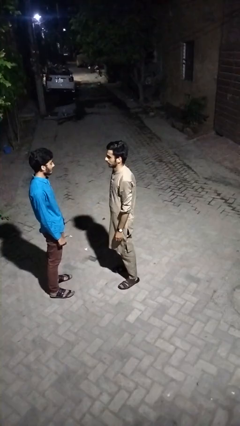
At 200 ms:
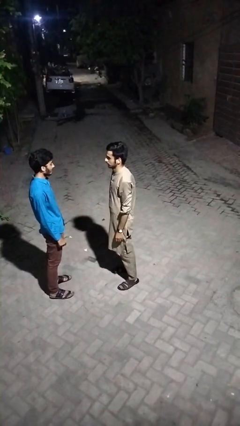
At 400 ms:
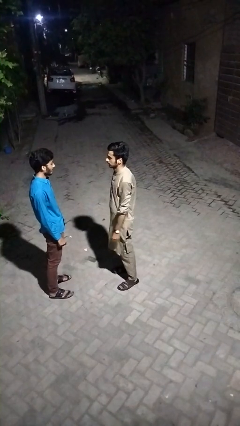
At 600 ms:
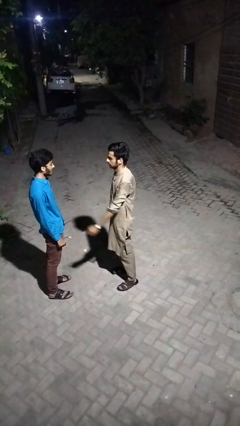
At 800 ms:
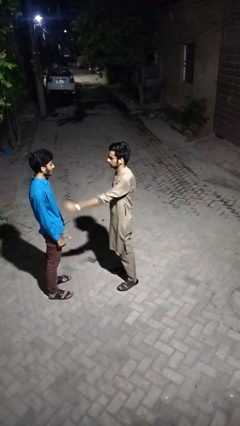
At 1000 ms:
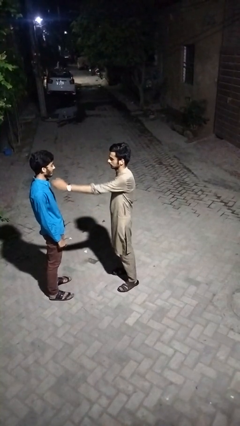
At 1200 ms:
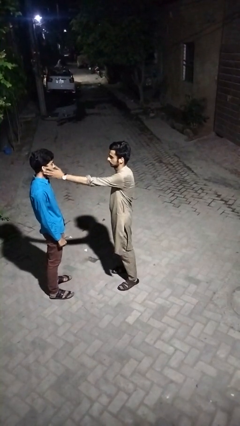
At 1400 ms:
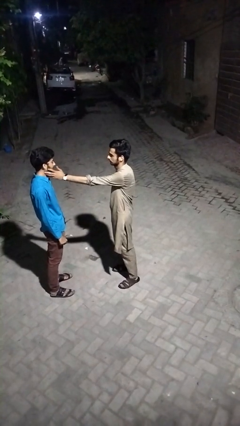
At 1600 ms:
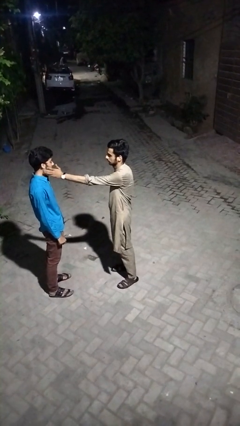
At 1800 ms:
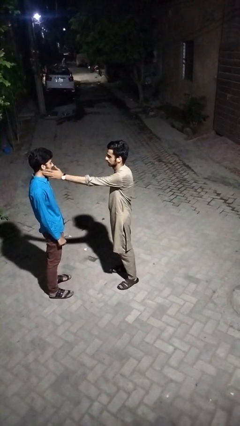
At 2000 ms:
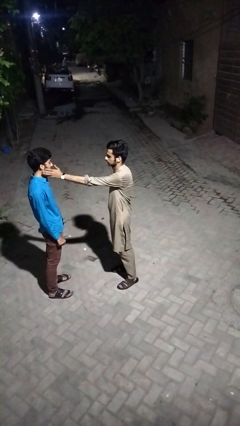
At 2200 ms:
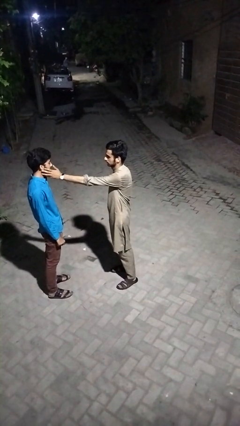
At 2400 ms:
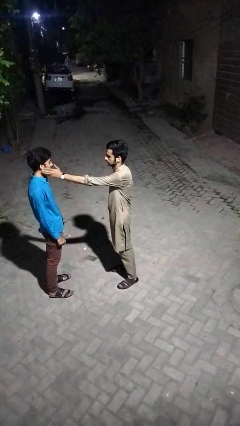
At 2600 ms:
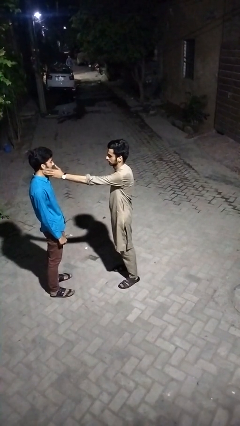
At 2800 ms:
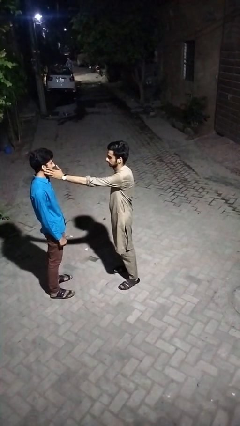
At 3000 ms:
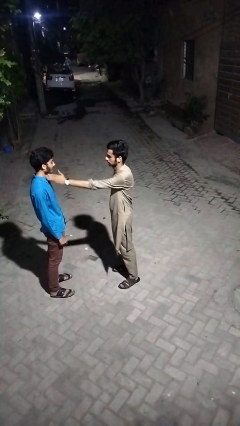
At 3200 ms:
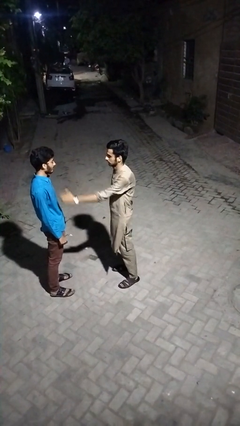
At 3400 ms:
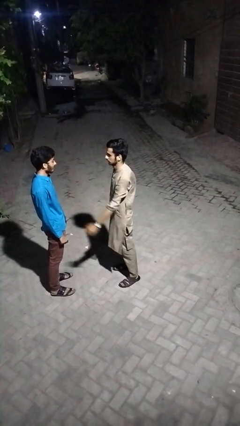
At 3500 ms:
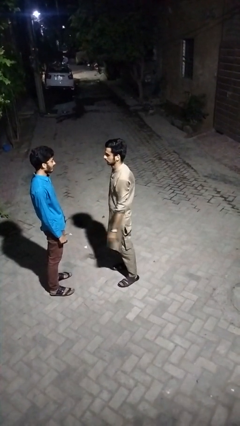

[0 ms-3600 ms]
person touches face of person

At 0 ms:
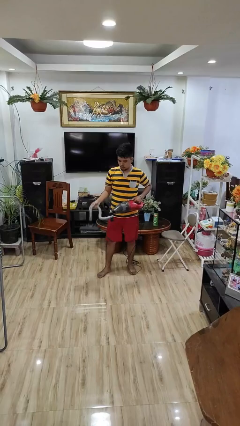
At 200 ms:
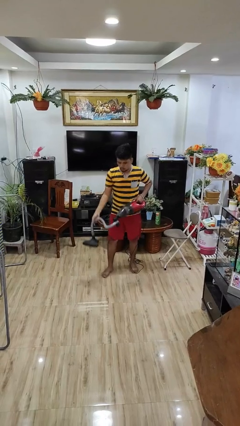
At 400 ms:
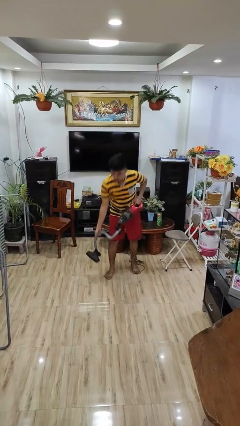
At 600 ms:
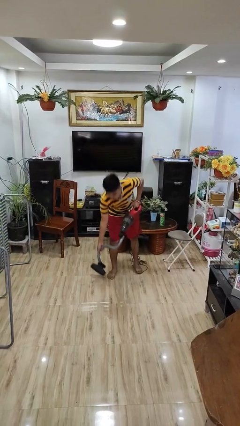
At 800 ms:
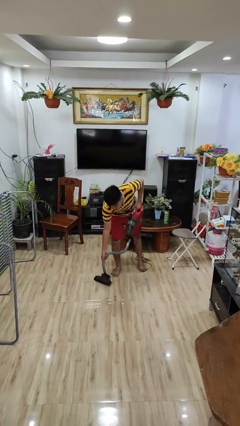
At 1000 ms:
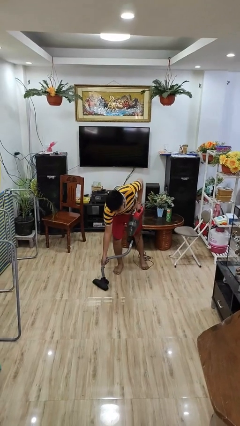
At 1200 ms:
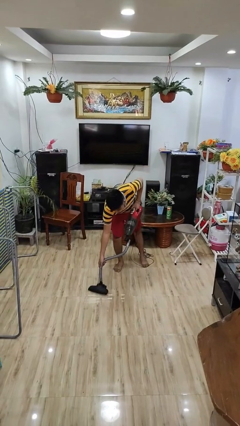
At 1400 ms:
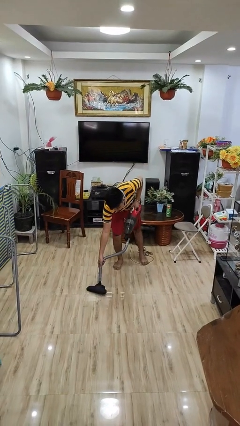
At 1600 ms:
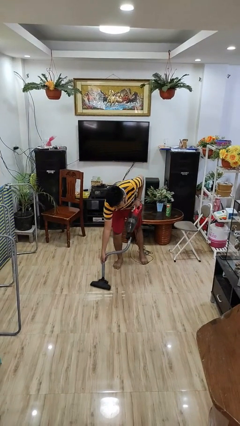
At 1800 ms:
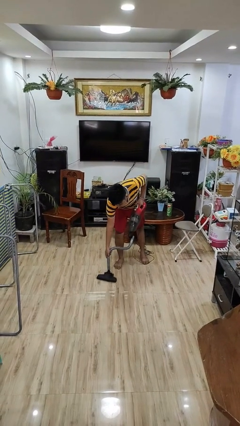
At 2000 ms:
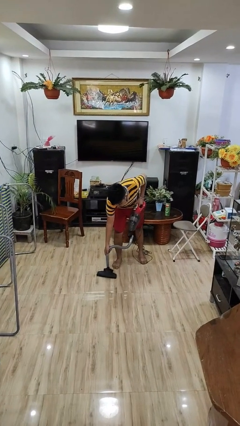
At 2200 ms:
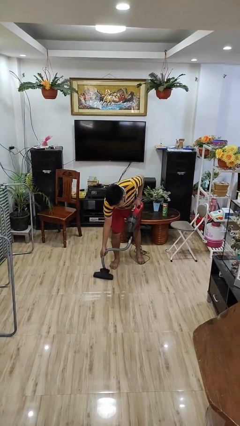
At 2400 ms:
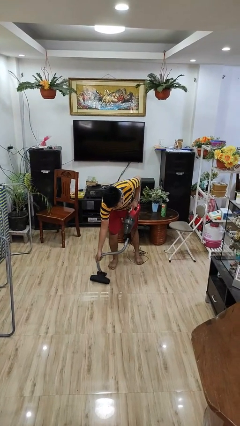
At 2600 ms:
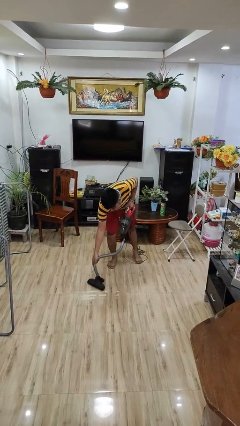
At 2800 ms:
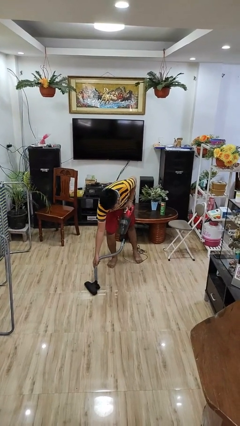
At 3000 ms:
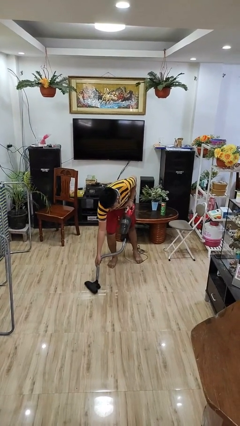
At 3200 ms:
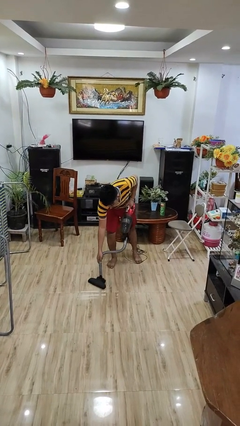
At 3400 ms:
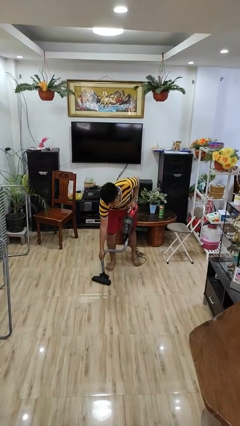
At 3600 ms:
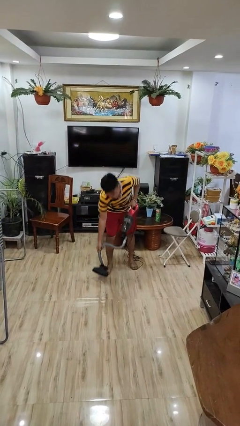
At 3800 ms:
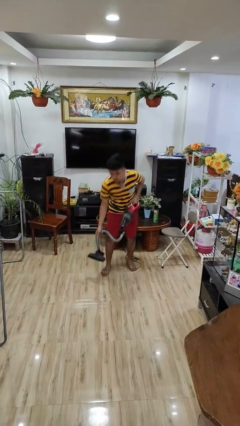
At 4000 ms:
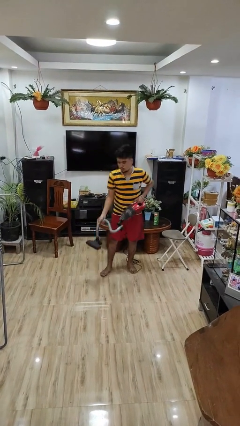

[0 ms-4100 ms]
person vacuums carpet

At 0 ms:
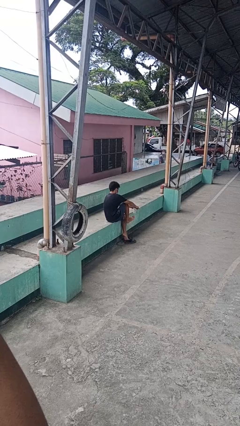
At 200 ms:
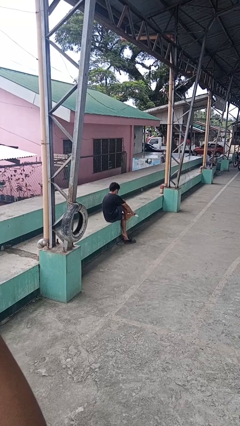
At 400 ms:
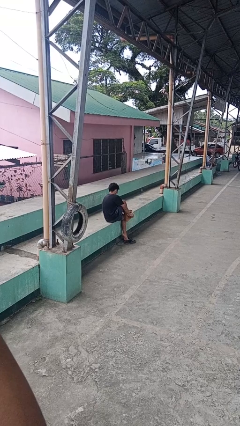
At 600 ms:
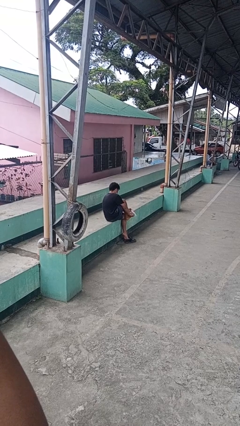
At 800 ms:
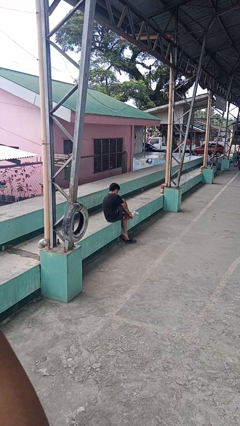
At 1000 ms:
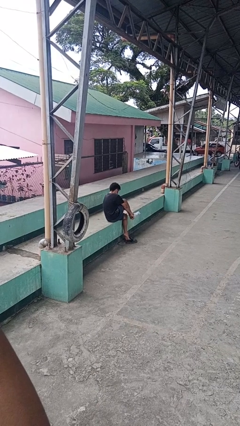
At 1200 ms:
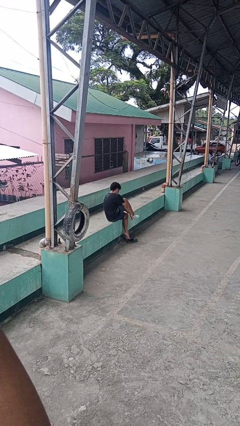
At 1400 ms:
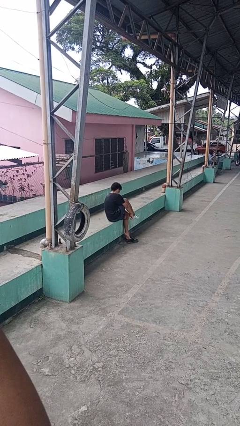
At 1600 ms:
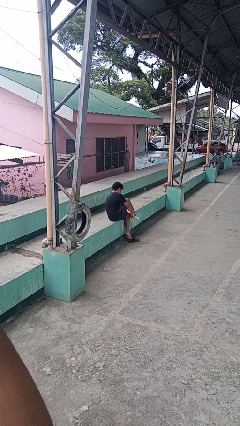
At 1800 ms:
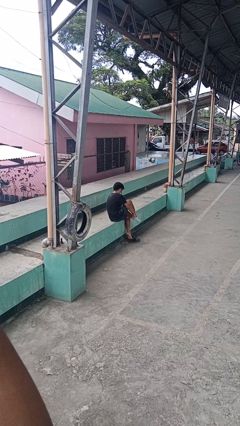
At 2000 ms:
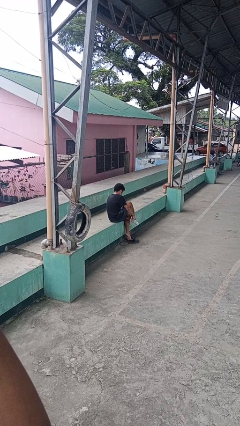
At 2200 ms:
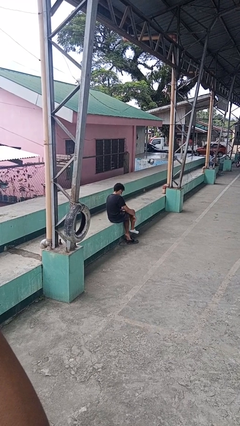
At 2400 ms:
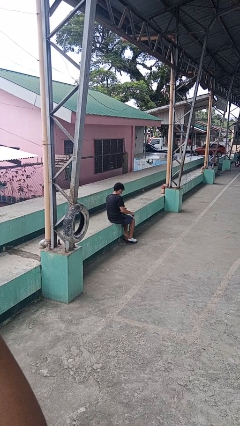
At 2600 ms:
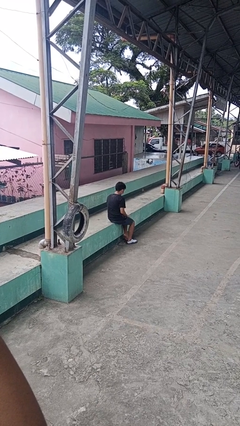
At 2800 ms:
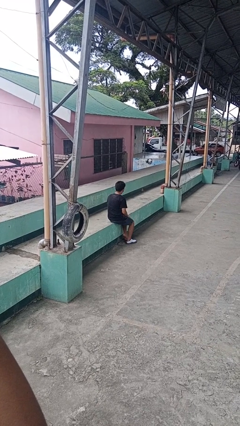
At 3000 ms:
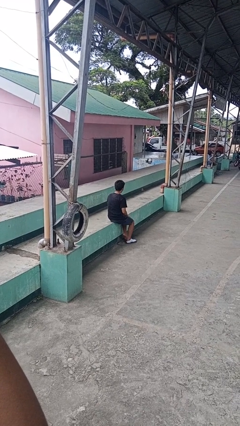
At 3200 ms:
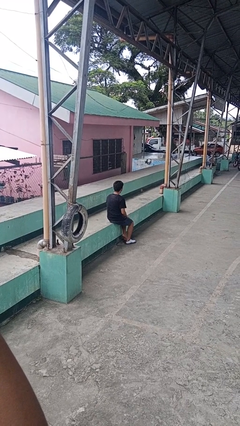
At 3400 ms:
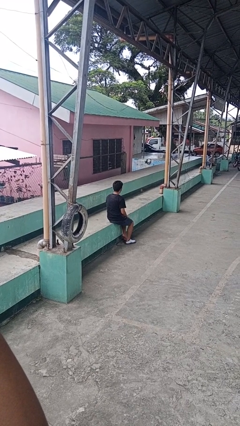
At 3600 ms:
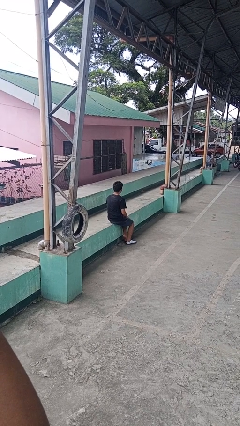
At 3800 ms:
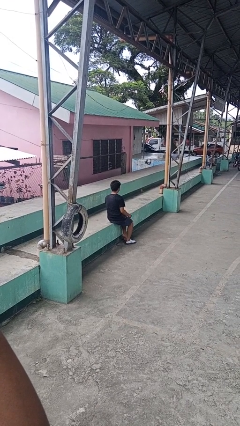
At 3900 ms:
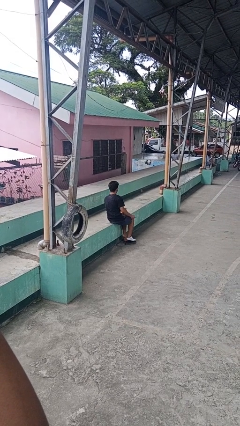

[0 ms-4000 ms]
person puts on socks

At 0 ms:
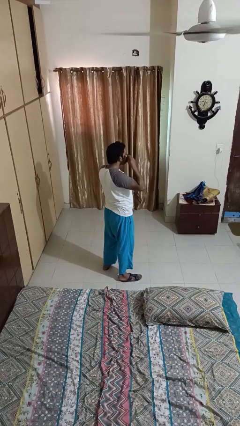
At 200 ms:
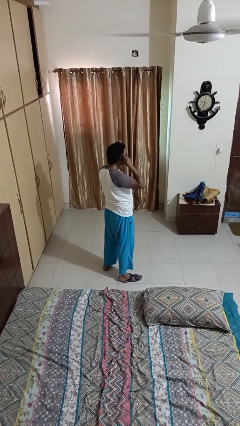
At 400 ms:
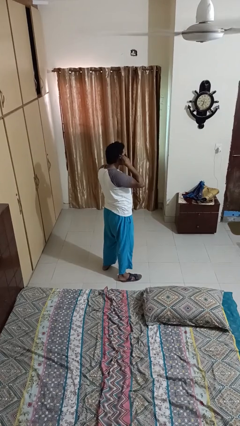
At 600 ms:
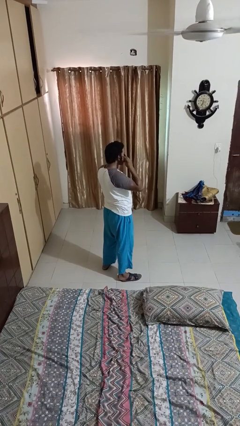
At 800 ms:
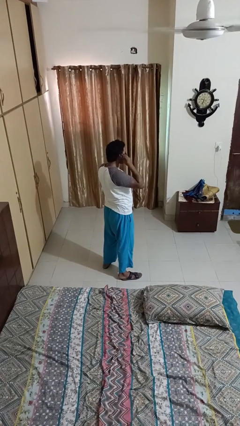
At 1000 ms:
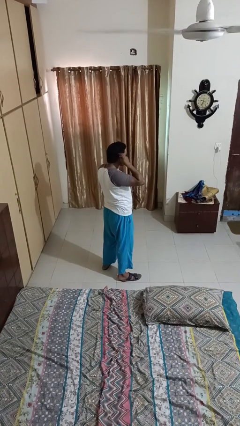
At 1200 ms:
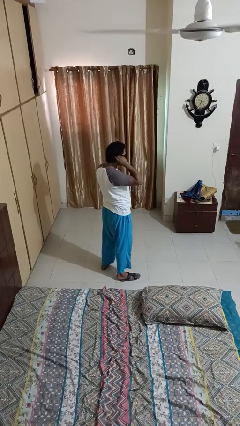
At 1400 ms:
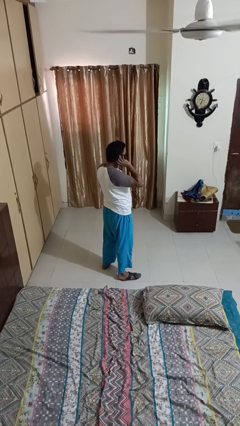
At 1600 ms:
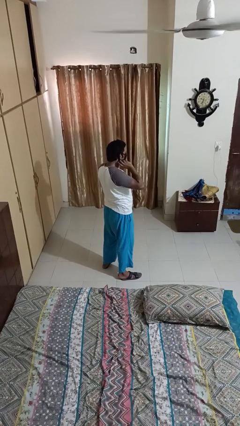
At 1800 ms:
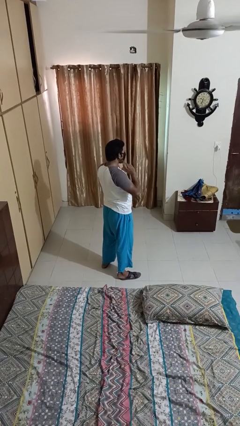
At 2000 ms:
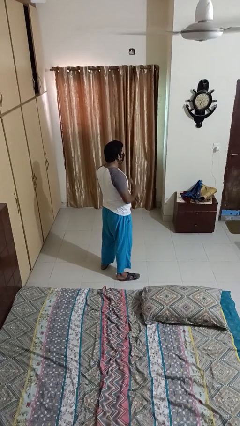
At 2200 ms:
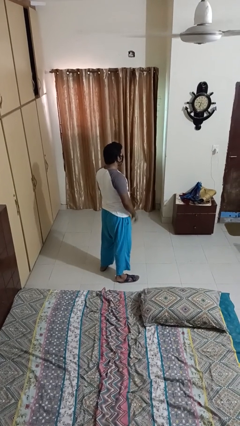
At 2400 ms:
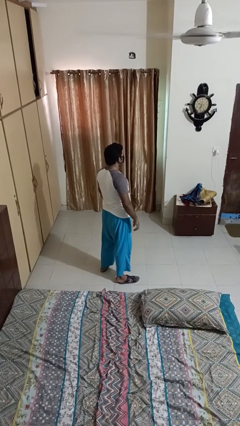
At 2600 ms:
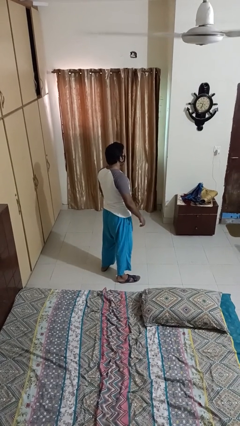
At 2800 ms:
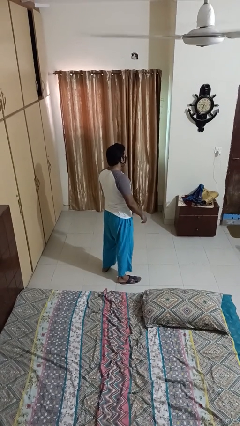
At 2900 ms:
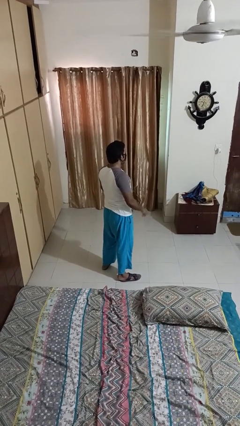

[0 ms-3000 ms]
person puts on facemask

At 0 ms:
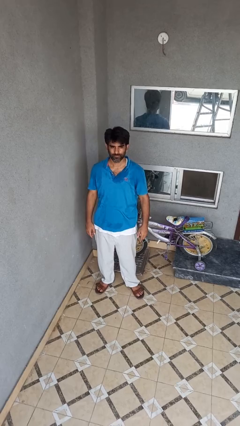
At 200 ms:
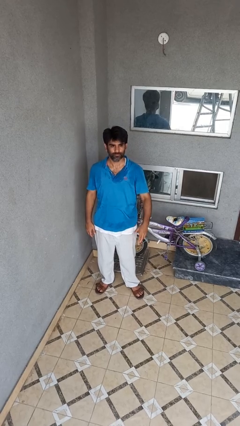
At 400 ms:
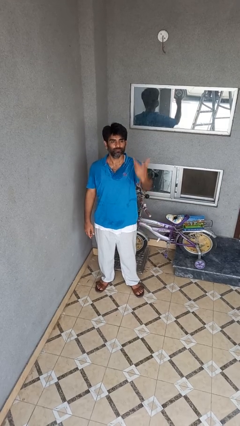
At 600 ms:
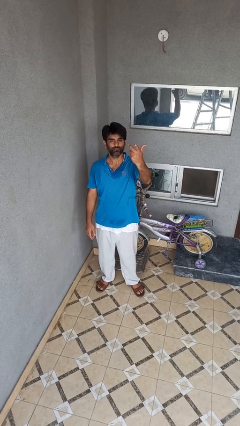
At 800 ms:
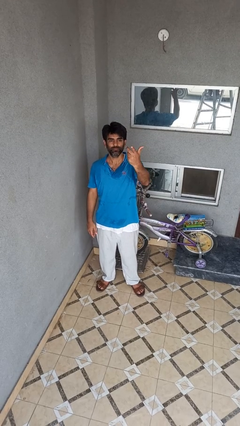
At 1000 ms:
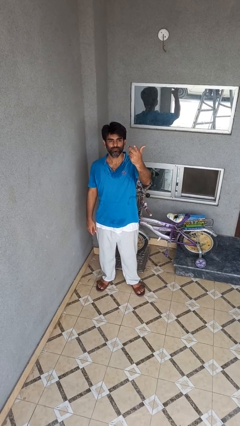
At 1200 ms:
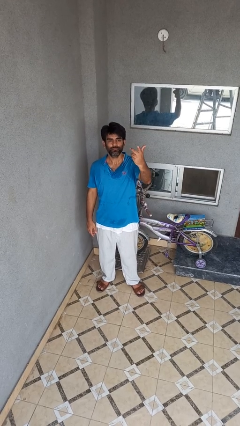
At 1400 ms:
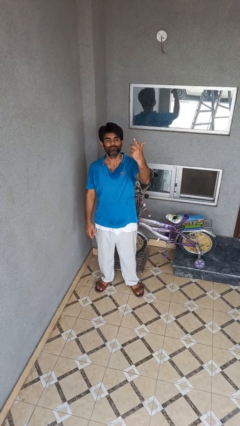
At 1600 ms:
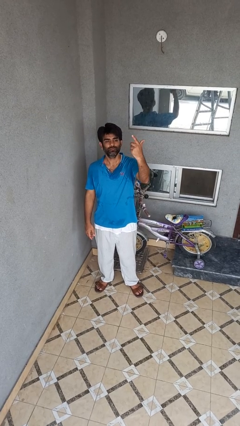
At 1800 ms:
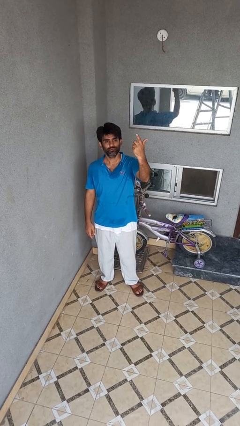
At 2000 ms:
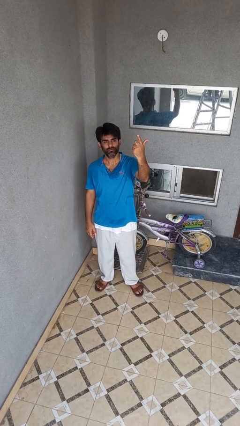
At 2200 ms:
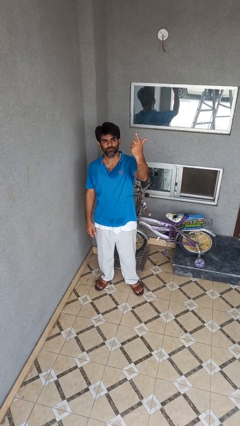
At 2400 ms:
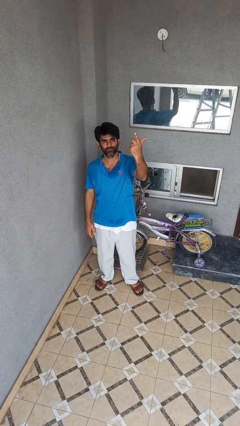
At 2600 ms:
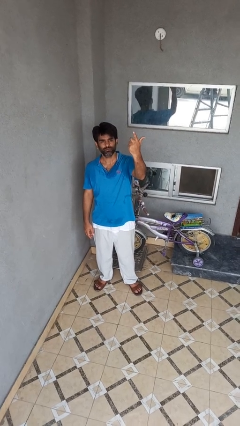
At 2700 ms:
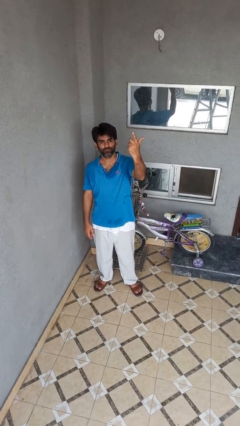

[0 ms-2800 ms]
person gestures raise hand
